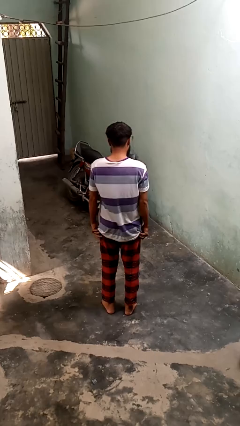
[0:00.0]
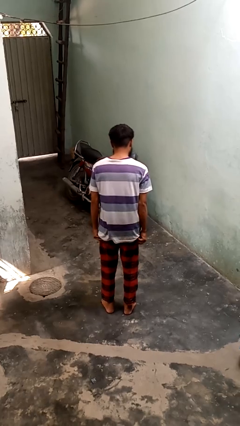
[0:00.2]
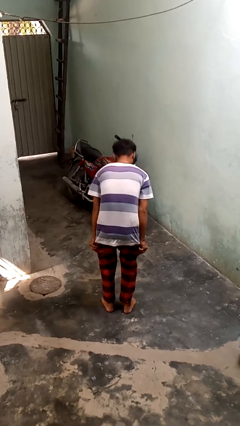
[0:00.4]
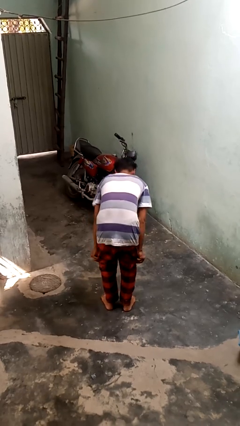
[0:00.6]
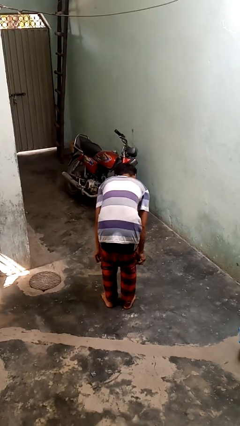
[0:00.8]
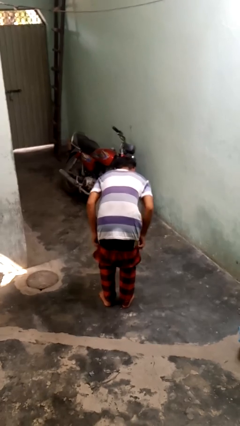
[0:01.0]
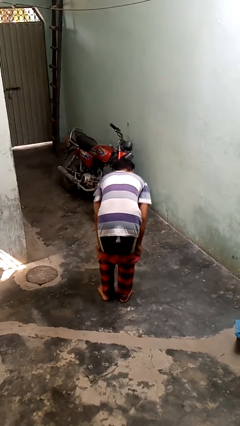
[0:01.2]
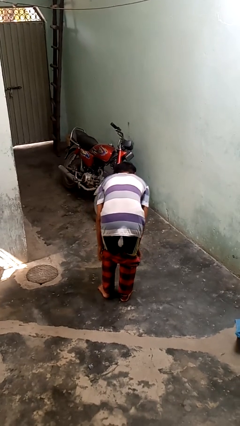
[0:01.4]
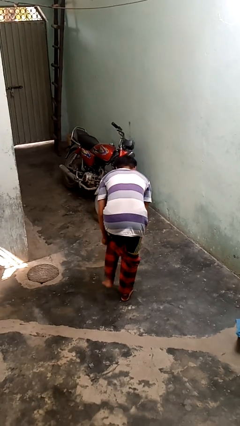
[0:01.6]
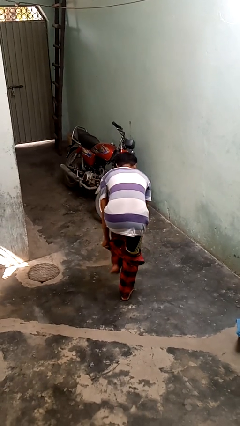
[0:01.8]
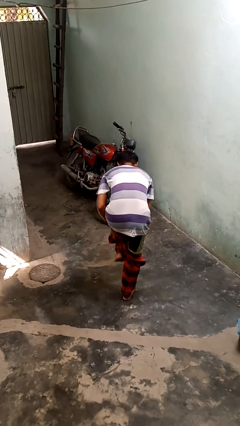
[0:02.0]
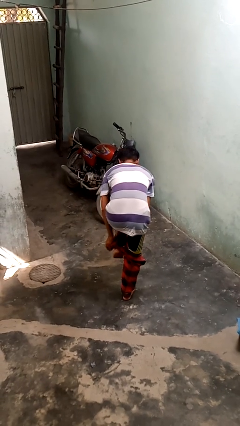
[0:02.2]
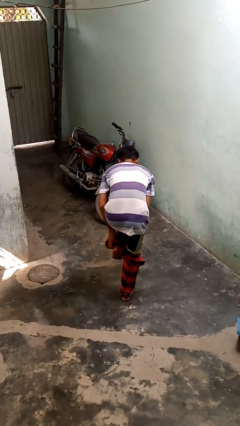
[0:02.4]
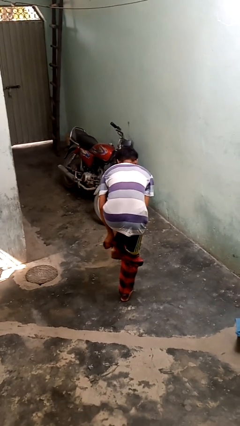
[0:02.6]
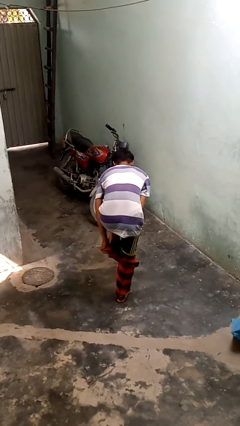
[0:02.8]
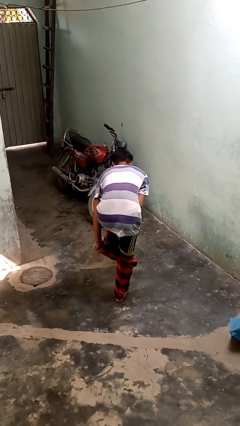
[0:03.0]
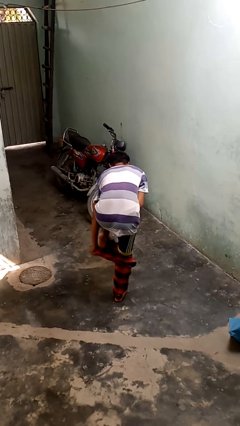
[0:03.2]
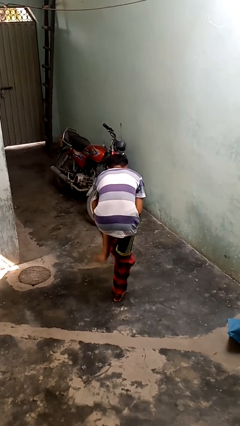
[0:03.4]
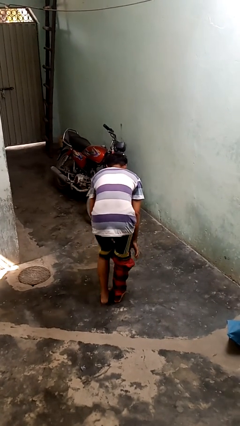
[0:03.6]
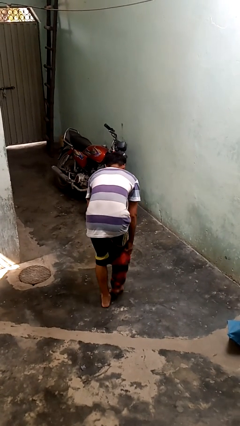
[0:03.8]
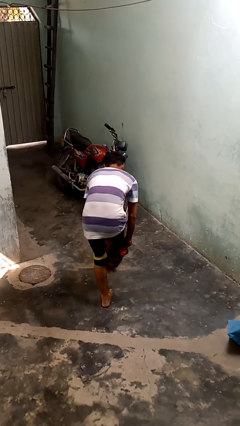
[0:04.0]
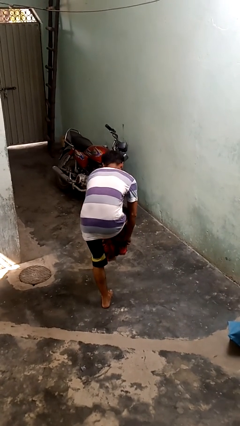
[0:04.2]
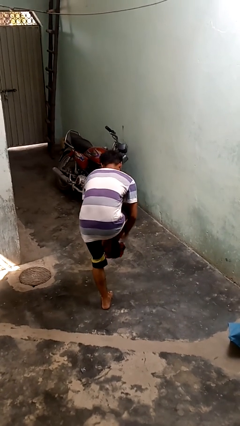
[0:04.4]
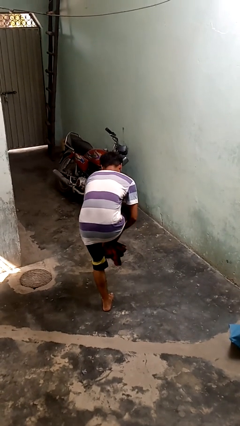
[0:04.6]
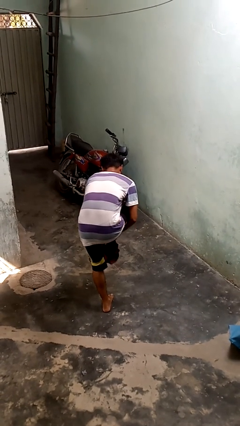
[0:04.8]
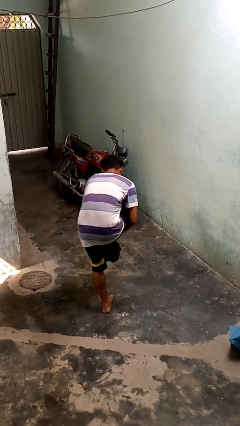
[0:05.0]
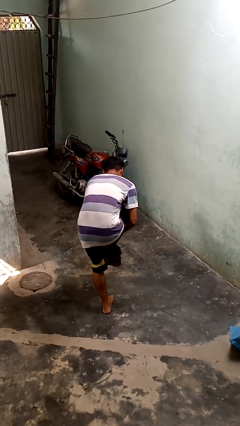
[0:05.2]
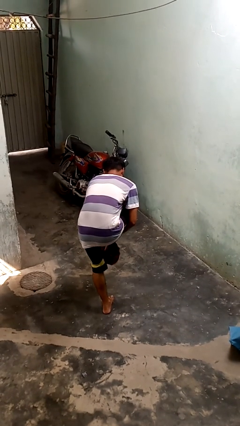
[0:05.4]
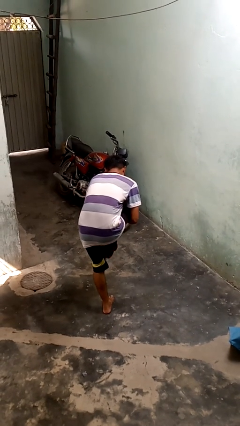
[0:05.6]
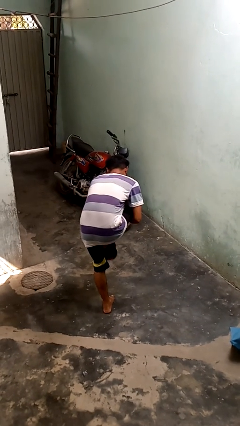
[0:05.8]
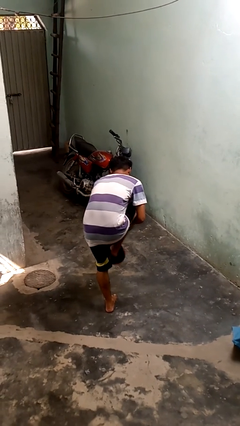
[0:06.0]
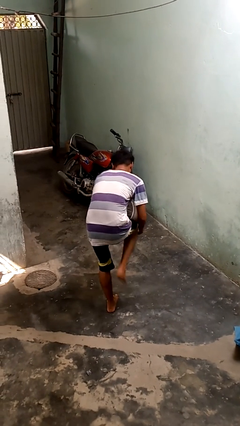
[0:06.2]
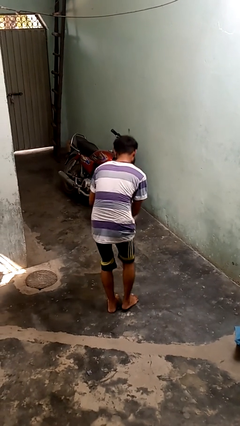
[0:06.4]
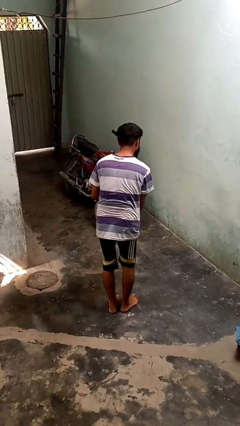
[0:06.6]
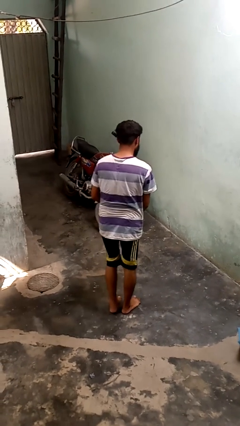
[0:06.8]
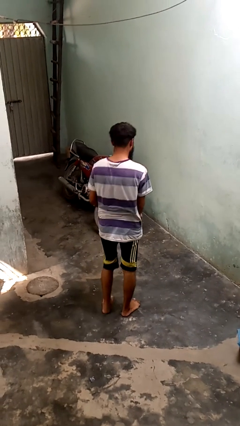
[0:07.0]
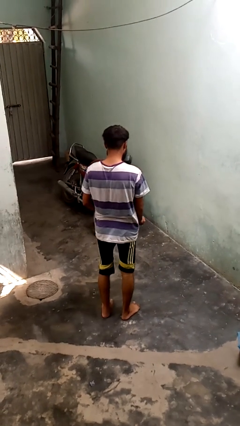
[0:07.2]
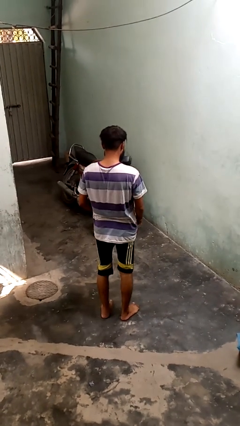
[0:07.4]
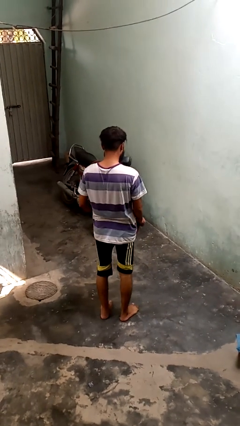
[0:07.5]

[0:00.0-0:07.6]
person takes off pants

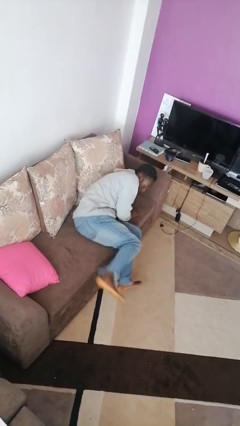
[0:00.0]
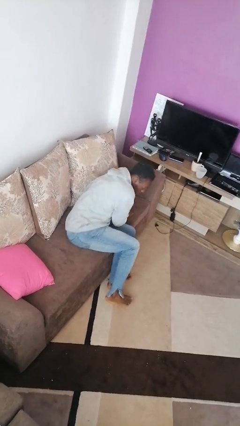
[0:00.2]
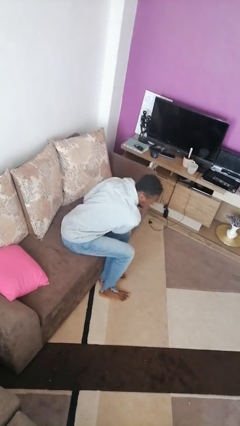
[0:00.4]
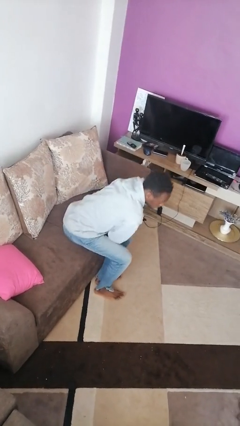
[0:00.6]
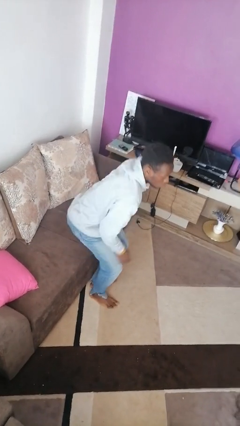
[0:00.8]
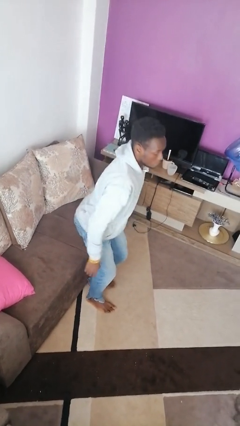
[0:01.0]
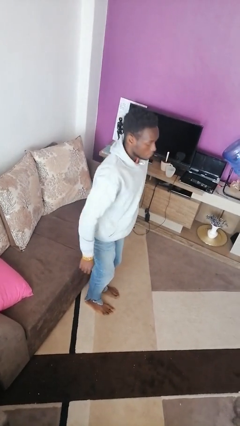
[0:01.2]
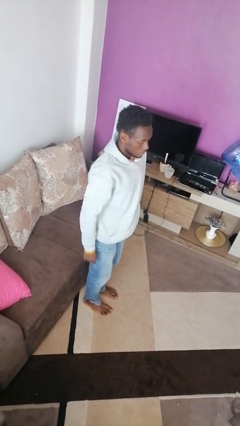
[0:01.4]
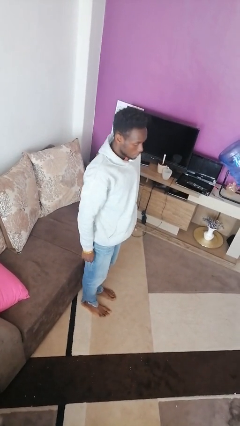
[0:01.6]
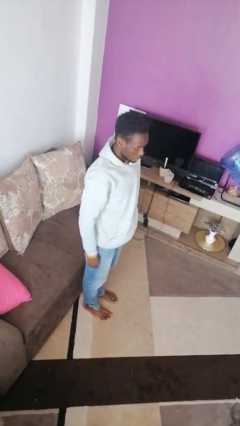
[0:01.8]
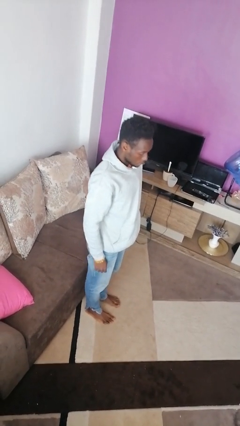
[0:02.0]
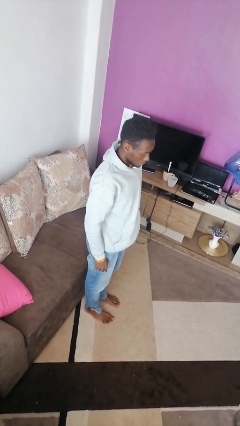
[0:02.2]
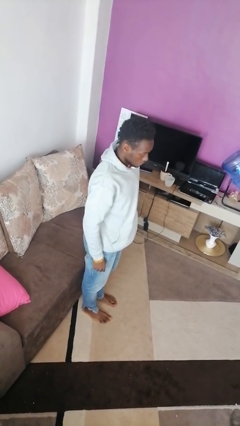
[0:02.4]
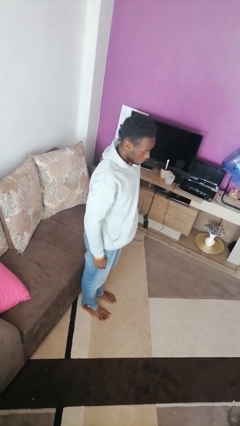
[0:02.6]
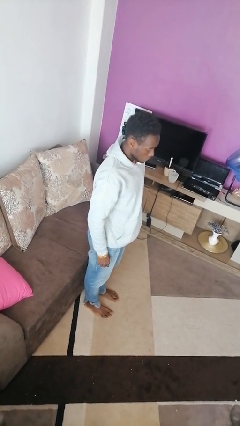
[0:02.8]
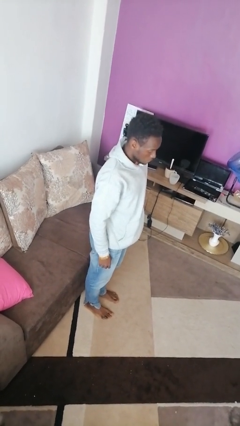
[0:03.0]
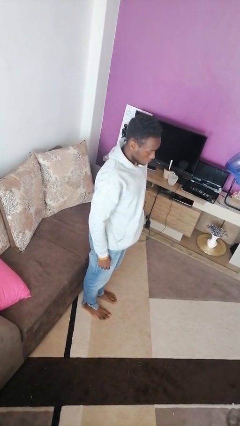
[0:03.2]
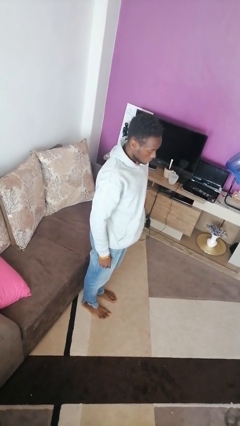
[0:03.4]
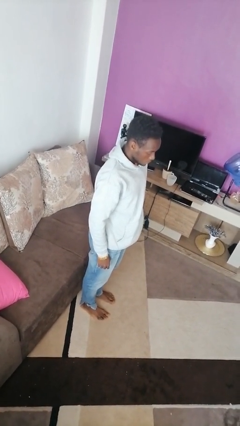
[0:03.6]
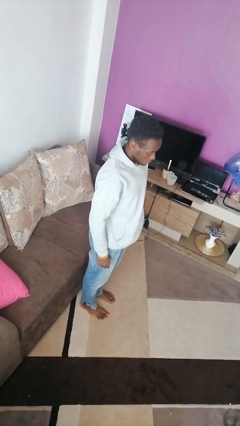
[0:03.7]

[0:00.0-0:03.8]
person stands up

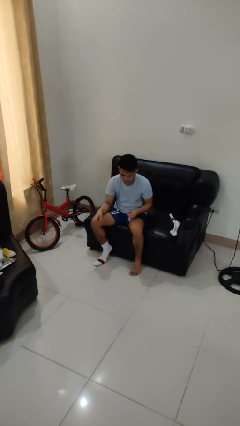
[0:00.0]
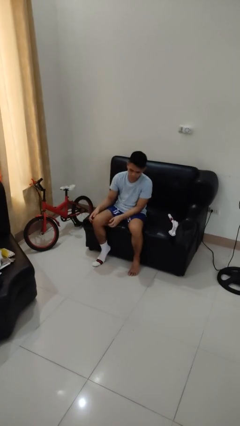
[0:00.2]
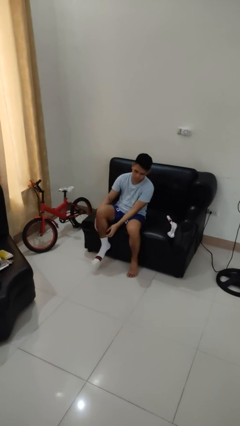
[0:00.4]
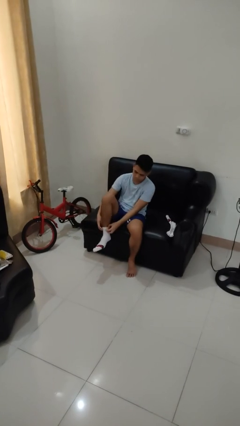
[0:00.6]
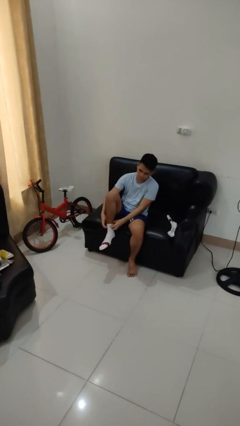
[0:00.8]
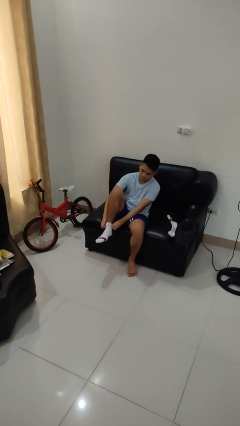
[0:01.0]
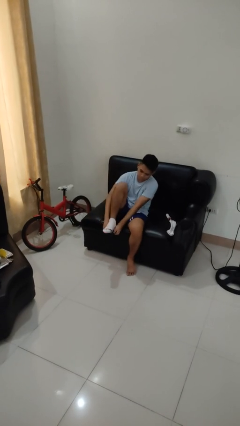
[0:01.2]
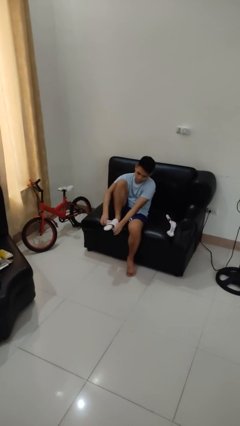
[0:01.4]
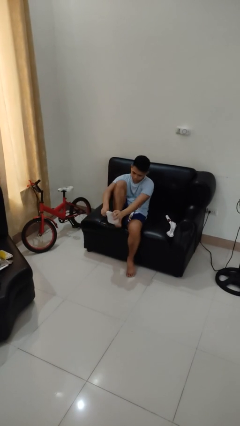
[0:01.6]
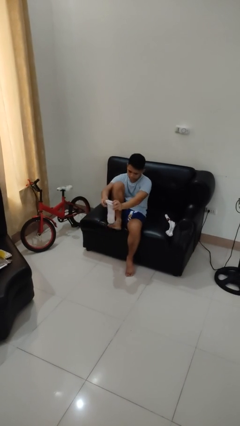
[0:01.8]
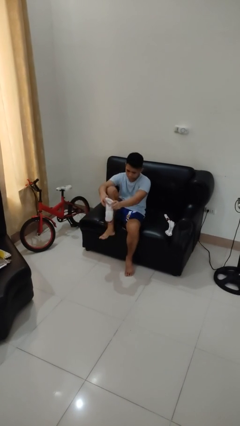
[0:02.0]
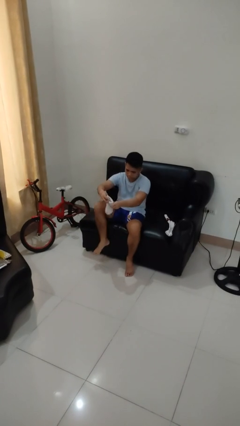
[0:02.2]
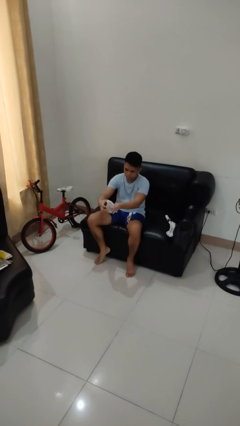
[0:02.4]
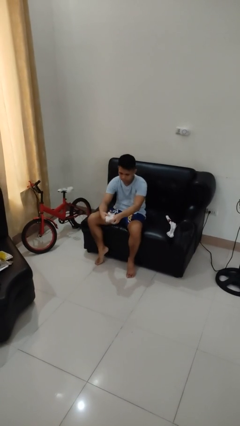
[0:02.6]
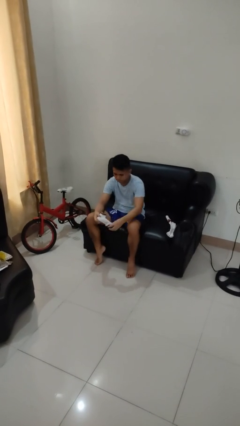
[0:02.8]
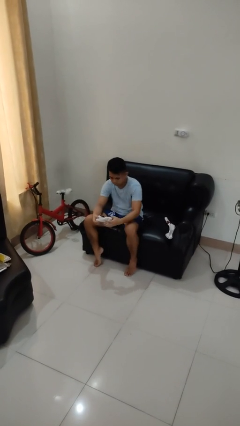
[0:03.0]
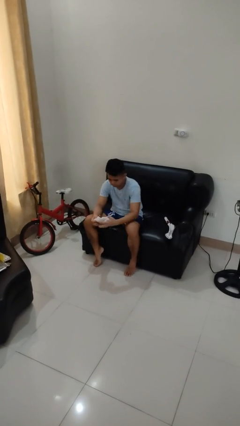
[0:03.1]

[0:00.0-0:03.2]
person takes off socks

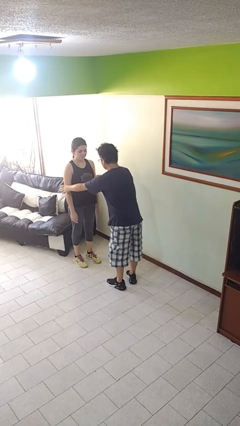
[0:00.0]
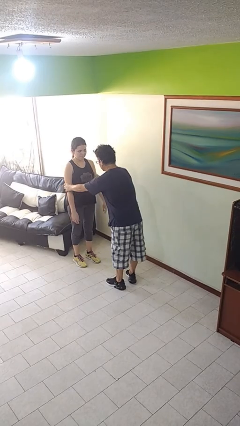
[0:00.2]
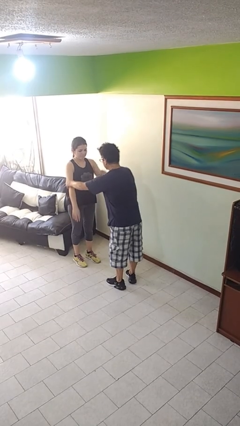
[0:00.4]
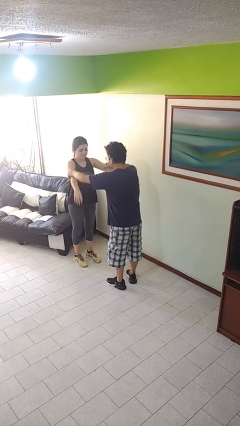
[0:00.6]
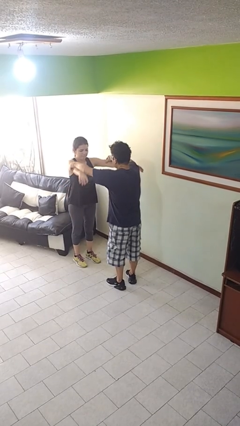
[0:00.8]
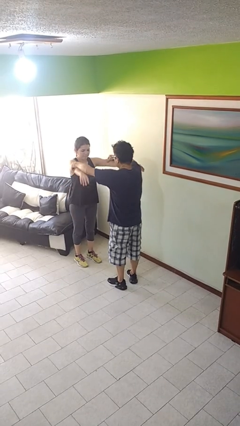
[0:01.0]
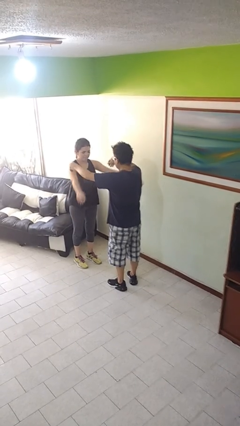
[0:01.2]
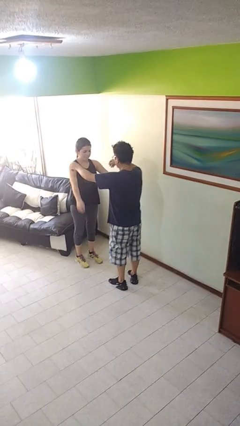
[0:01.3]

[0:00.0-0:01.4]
person grabs person by bicep

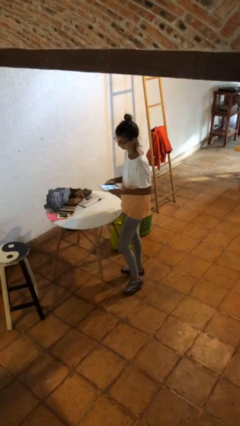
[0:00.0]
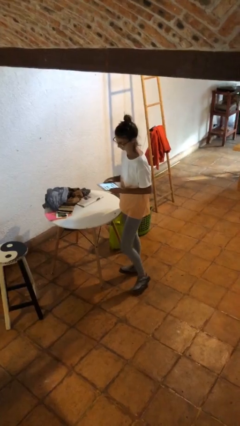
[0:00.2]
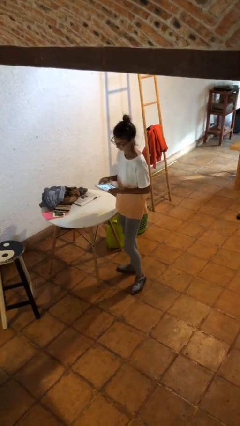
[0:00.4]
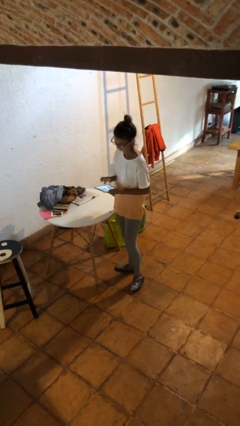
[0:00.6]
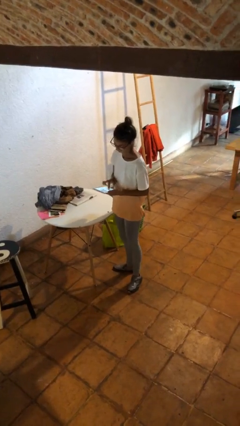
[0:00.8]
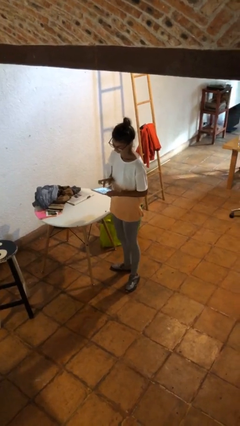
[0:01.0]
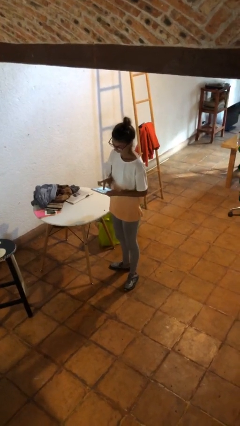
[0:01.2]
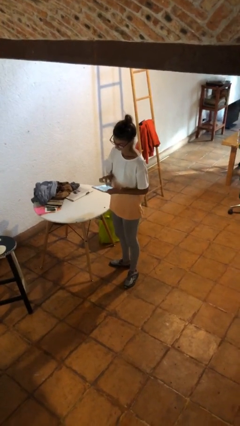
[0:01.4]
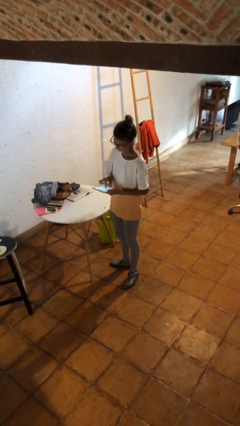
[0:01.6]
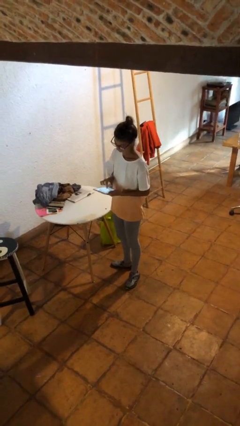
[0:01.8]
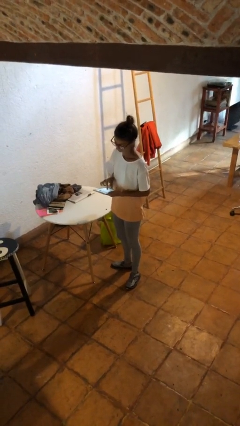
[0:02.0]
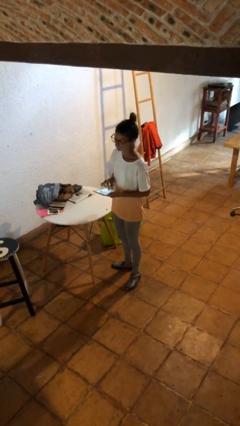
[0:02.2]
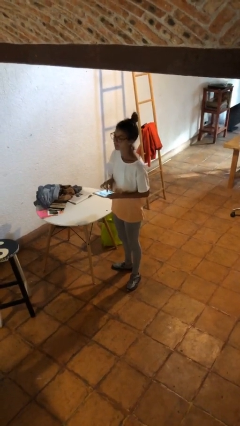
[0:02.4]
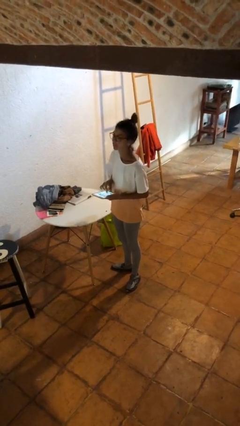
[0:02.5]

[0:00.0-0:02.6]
person interacts with tablet
